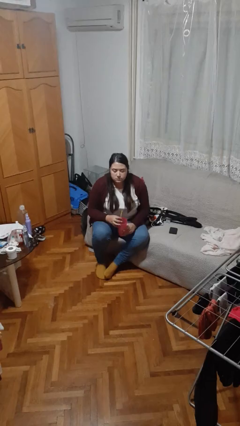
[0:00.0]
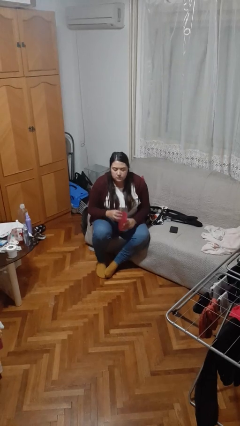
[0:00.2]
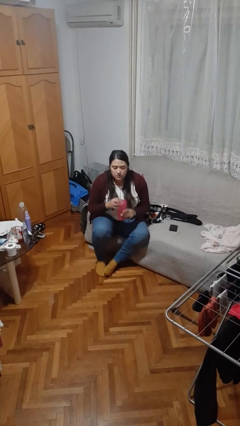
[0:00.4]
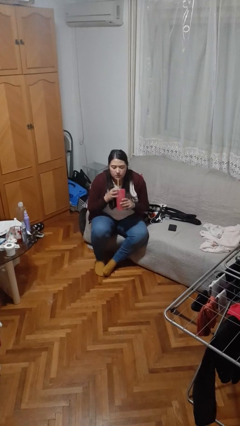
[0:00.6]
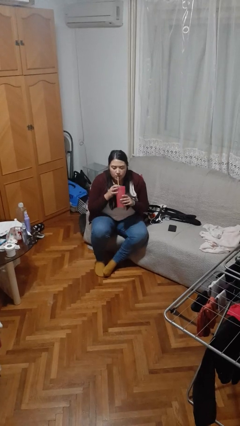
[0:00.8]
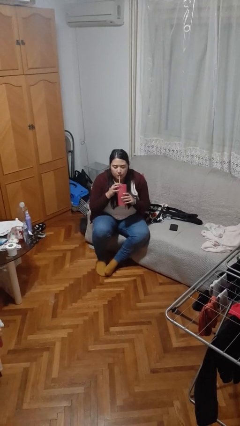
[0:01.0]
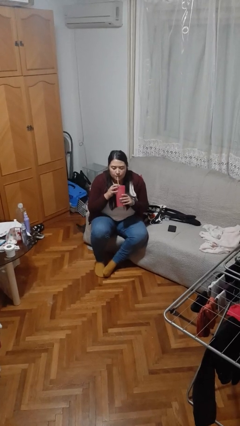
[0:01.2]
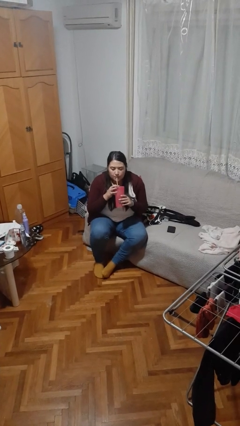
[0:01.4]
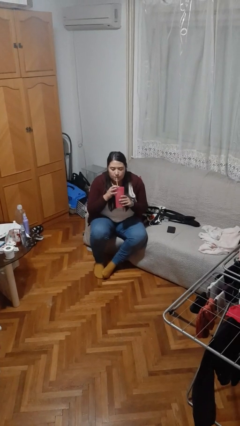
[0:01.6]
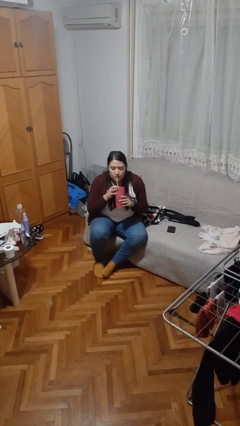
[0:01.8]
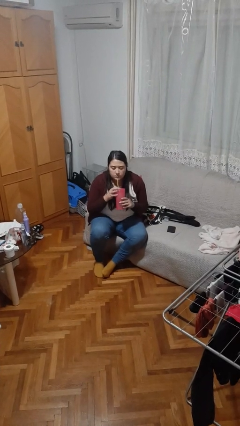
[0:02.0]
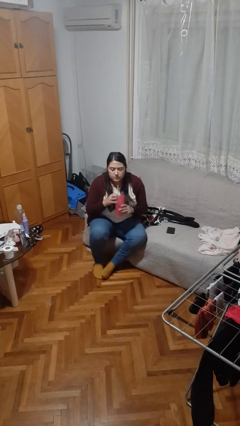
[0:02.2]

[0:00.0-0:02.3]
person drinks from straw

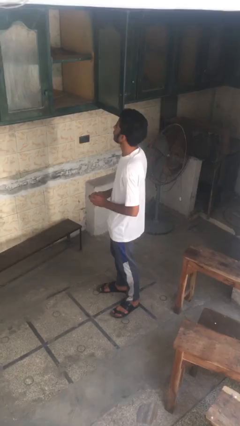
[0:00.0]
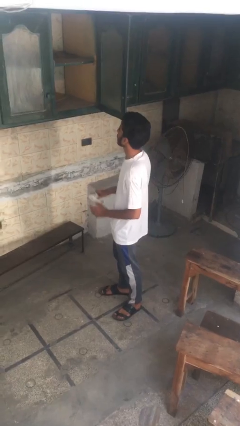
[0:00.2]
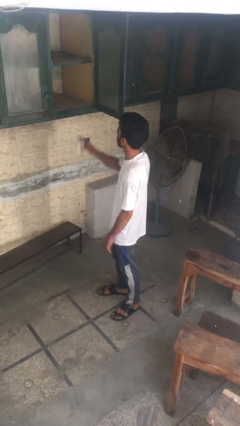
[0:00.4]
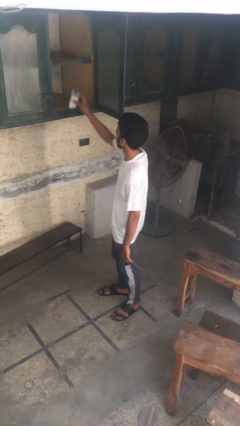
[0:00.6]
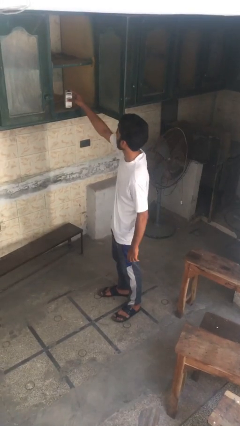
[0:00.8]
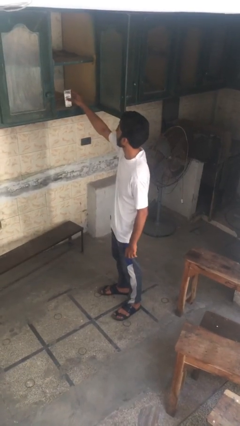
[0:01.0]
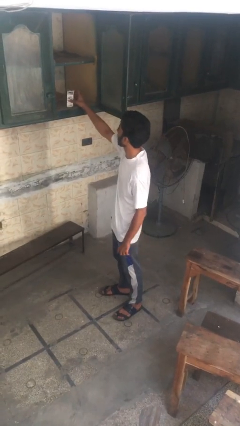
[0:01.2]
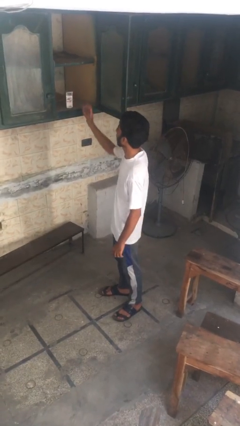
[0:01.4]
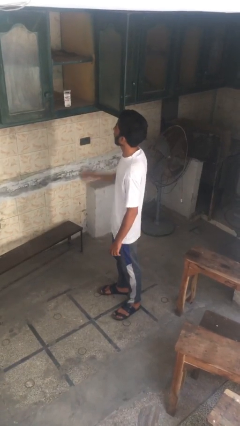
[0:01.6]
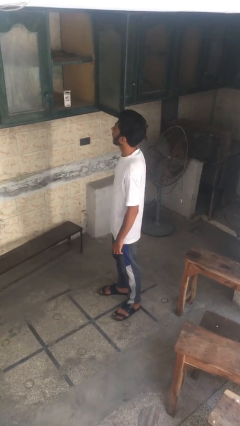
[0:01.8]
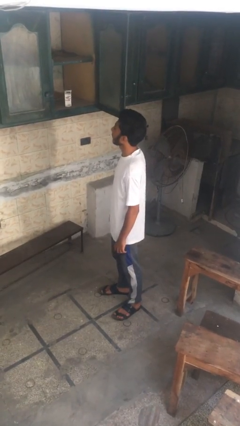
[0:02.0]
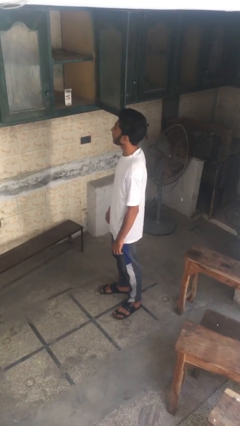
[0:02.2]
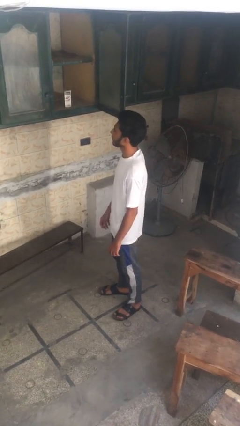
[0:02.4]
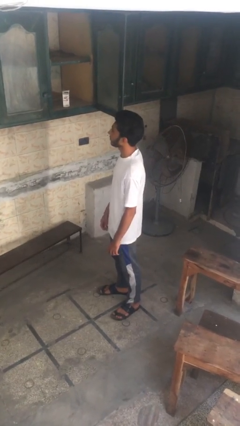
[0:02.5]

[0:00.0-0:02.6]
person puts object in cabinet

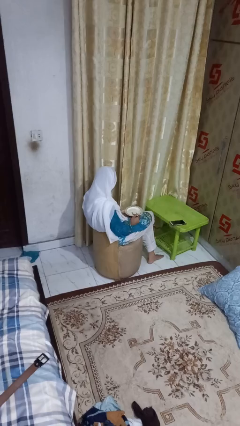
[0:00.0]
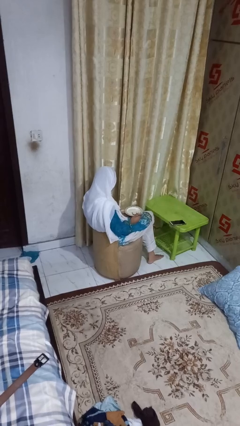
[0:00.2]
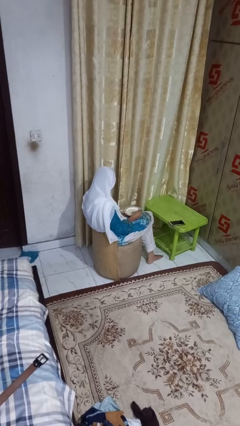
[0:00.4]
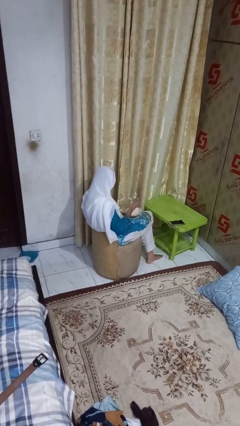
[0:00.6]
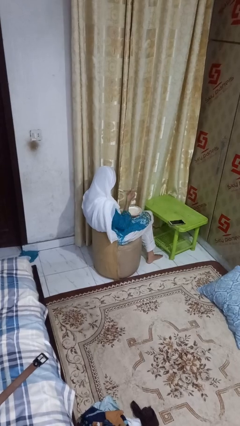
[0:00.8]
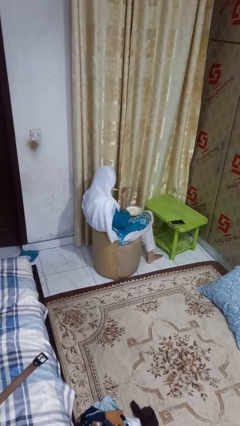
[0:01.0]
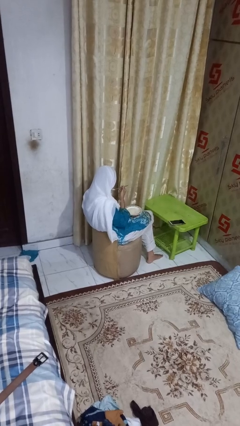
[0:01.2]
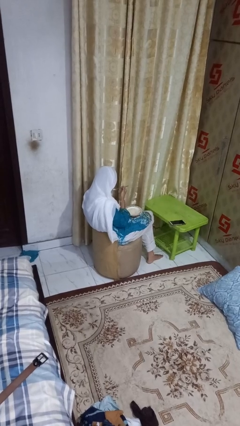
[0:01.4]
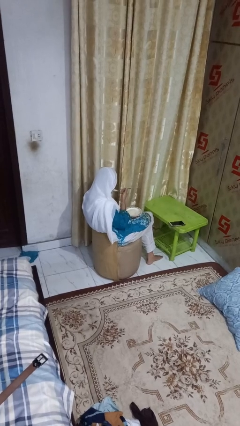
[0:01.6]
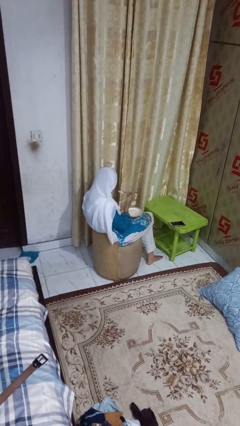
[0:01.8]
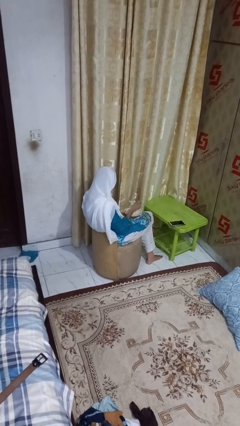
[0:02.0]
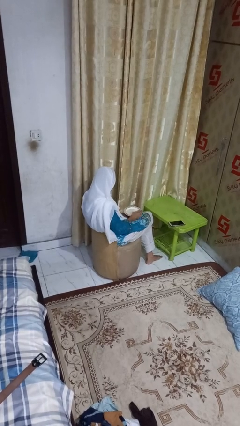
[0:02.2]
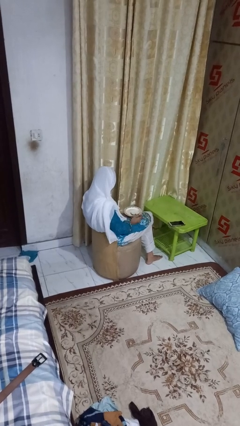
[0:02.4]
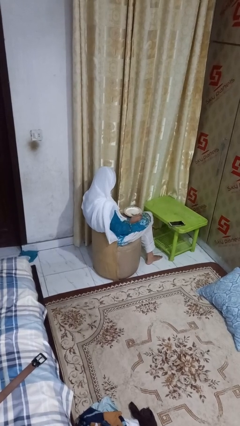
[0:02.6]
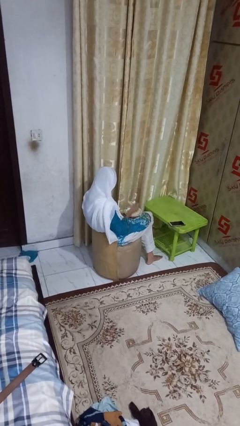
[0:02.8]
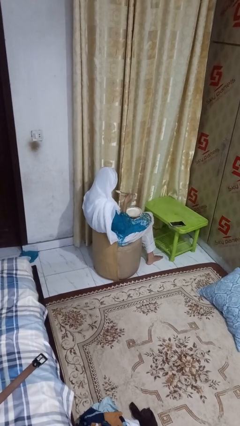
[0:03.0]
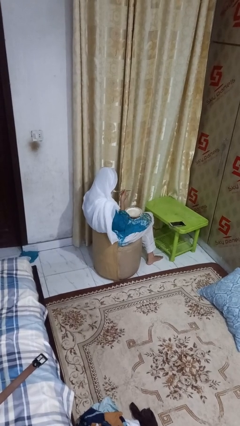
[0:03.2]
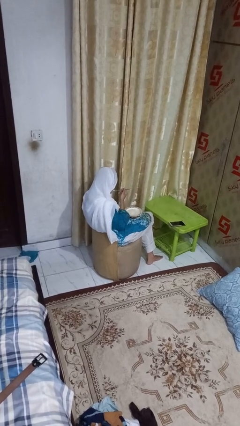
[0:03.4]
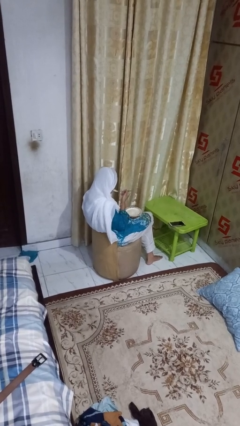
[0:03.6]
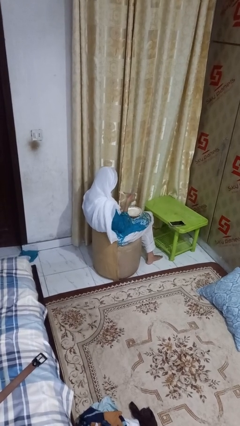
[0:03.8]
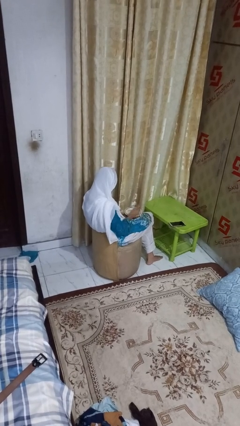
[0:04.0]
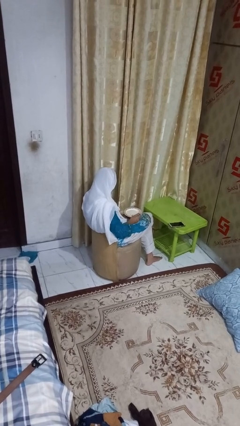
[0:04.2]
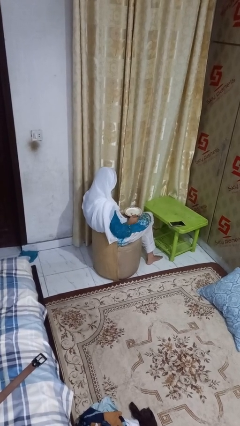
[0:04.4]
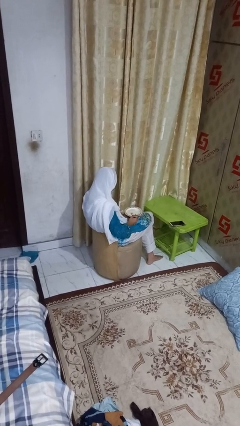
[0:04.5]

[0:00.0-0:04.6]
person eats with utensil

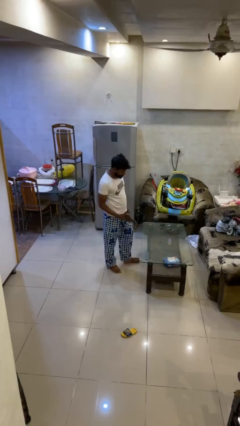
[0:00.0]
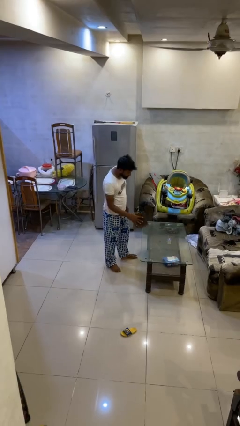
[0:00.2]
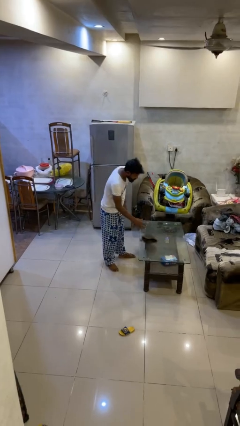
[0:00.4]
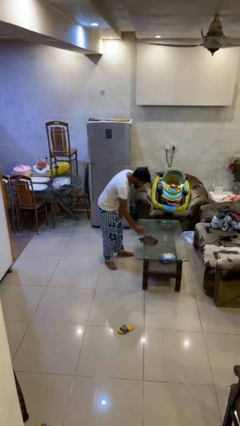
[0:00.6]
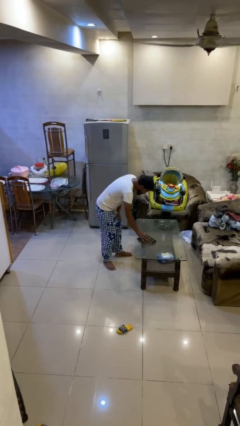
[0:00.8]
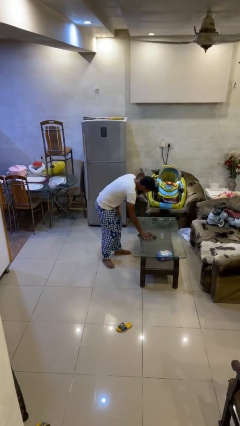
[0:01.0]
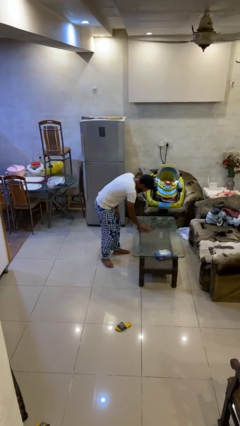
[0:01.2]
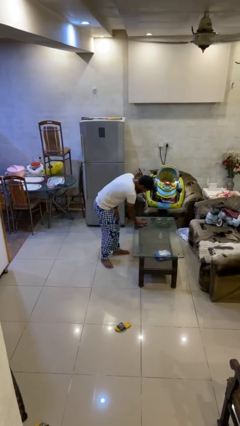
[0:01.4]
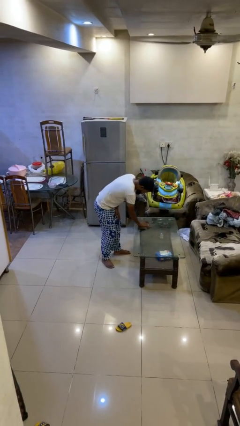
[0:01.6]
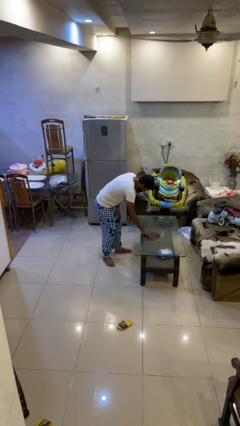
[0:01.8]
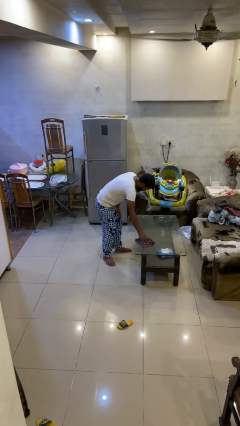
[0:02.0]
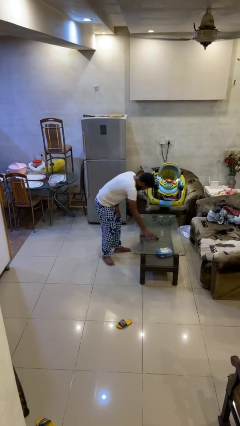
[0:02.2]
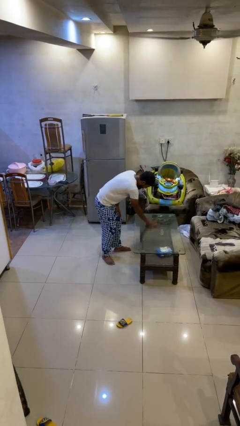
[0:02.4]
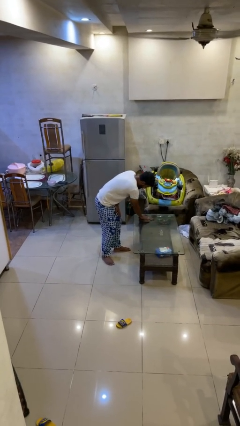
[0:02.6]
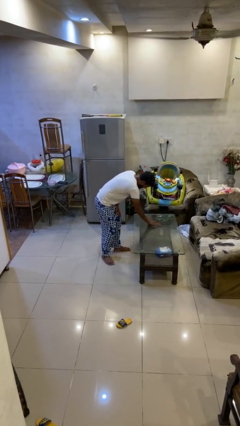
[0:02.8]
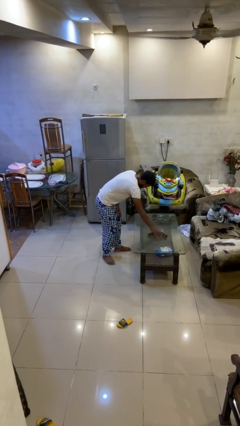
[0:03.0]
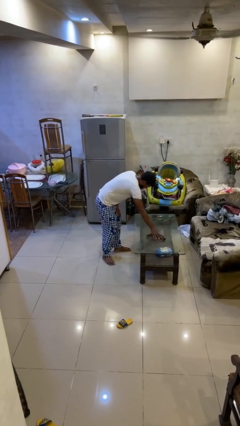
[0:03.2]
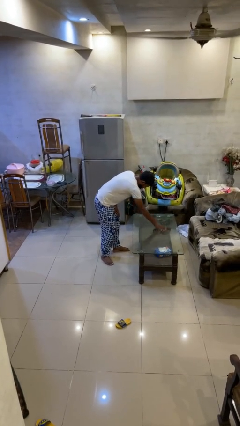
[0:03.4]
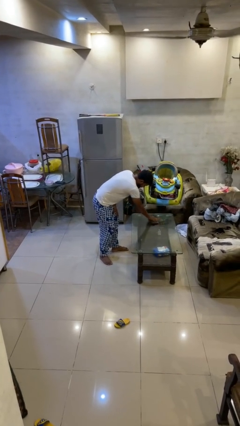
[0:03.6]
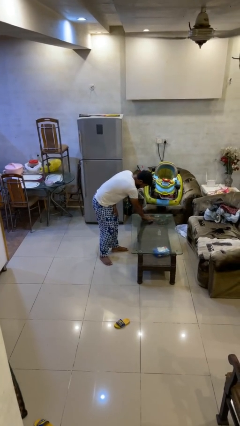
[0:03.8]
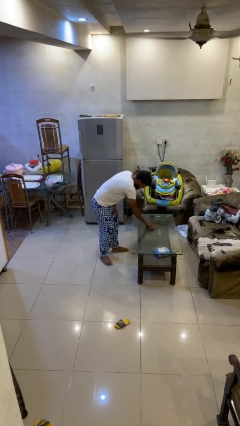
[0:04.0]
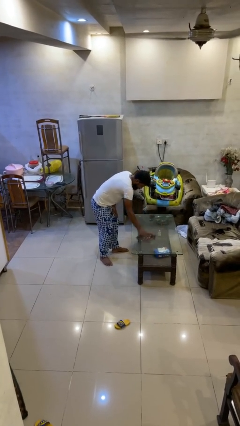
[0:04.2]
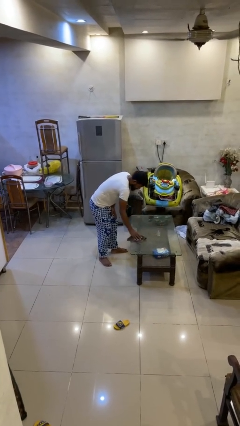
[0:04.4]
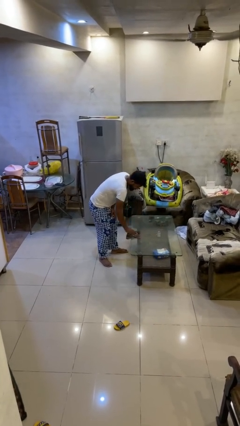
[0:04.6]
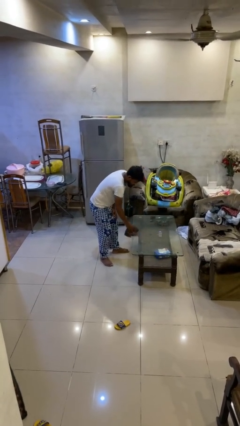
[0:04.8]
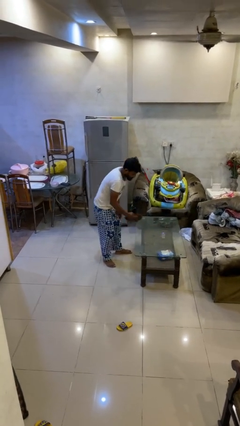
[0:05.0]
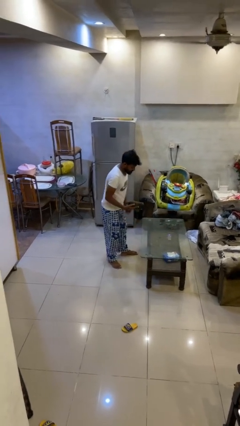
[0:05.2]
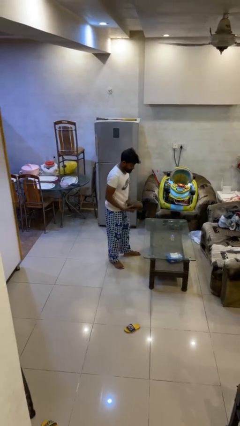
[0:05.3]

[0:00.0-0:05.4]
person cleans table with rag

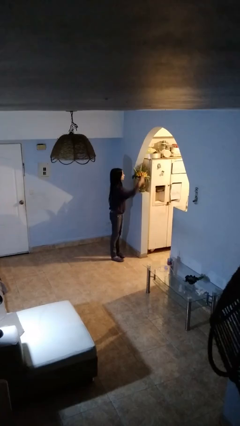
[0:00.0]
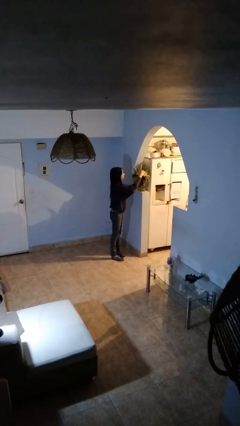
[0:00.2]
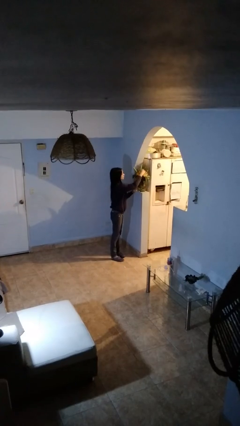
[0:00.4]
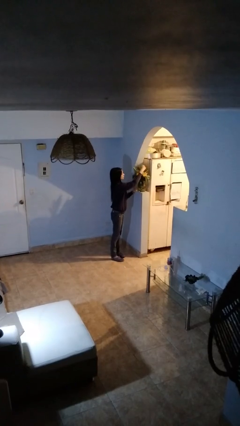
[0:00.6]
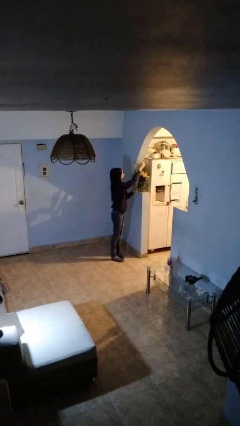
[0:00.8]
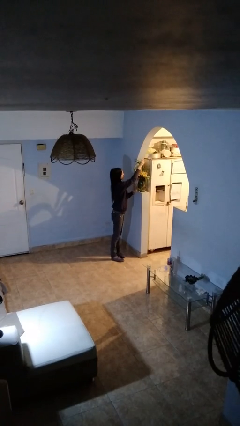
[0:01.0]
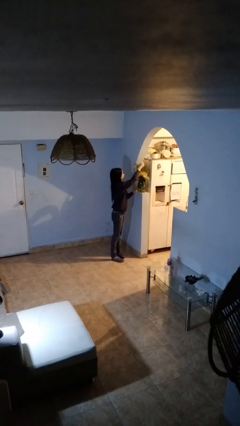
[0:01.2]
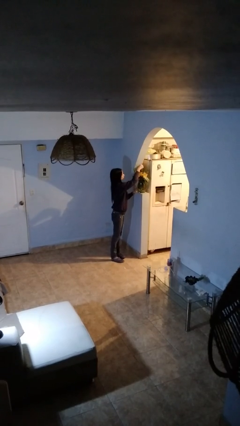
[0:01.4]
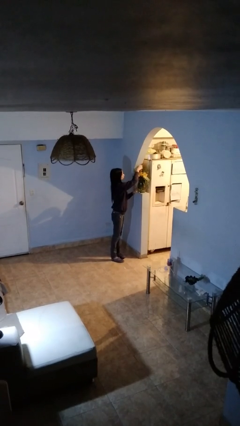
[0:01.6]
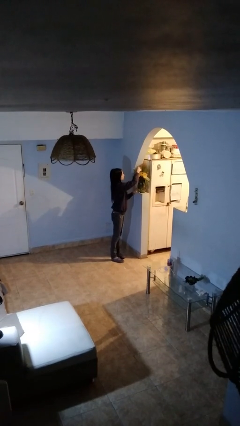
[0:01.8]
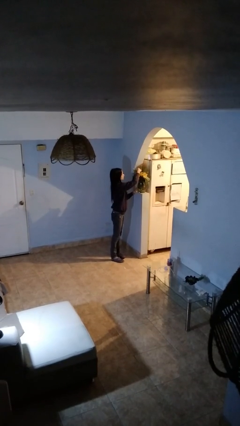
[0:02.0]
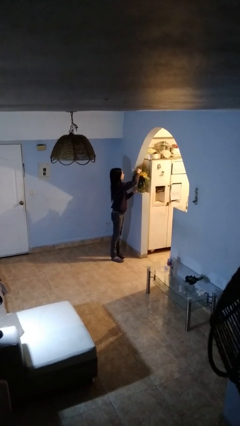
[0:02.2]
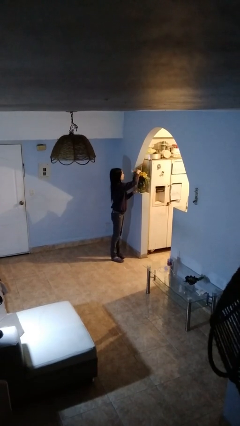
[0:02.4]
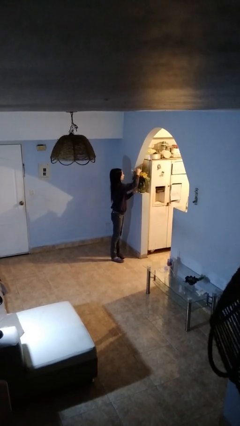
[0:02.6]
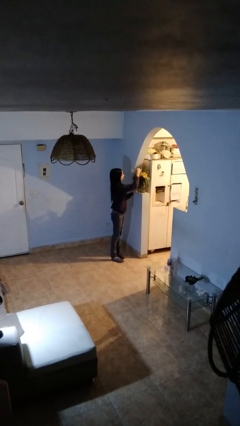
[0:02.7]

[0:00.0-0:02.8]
person arranges flowers in vase
